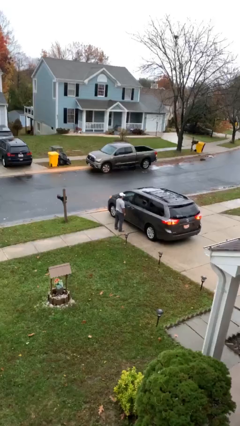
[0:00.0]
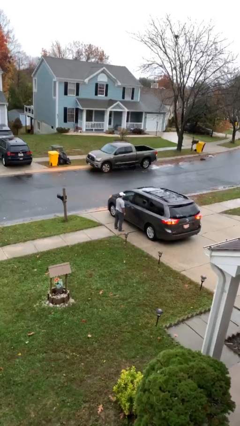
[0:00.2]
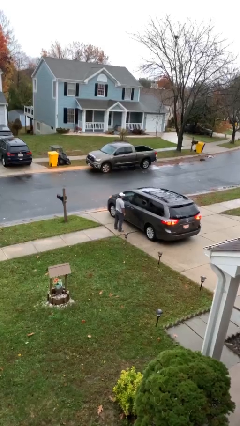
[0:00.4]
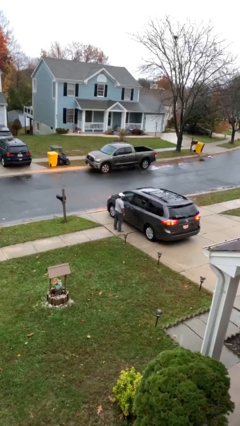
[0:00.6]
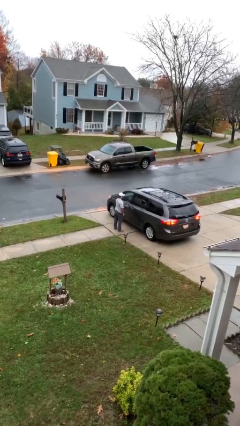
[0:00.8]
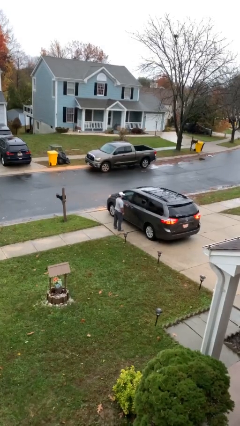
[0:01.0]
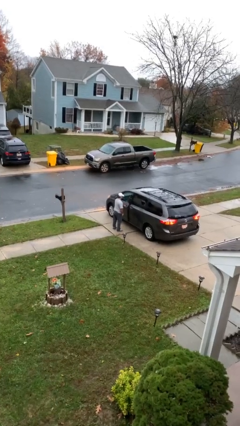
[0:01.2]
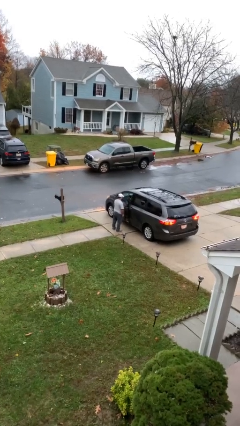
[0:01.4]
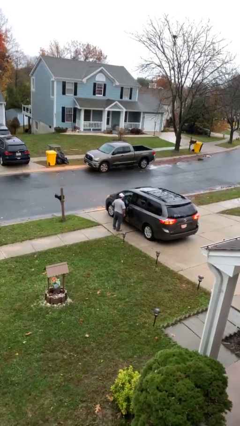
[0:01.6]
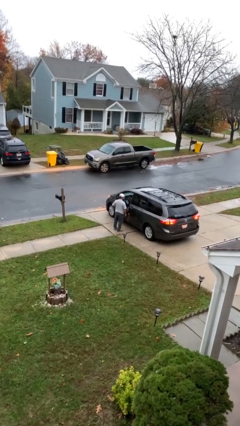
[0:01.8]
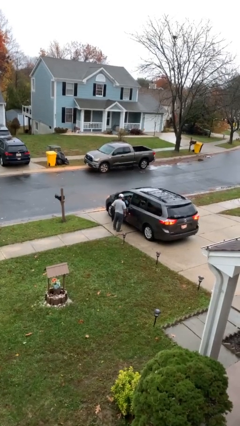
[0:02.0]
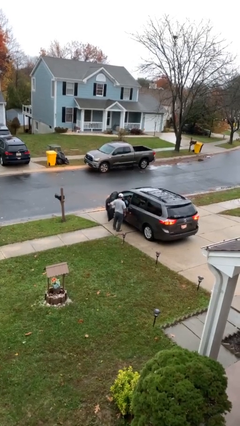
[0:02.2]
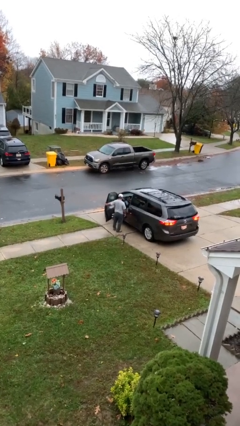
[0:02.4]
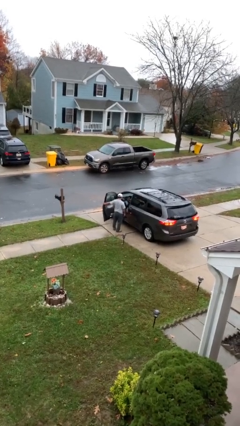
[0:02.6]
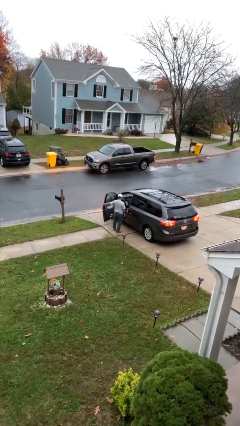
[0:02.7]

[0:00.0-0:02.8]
person opens car door

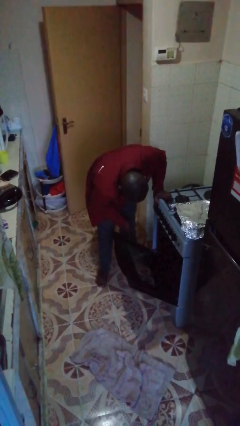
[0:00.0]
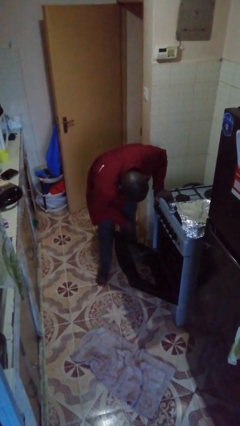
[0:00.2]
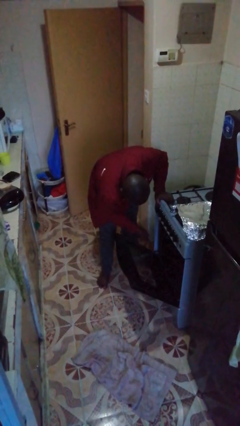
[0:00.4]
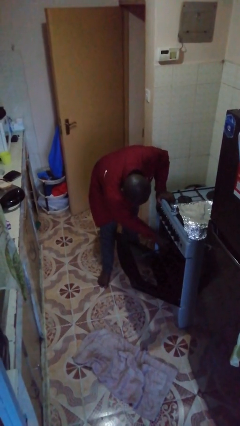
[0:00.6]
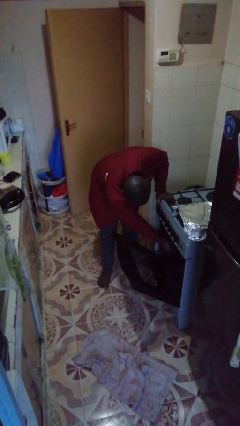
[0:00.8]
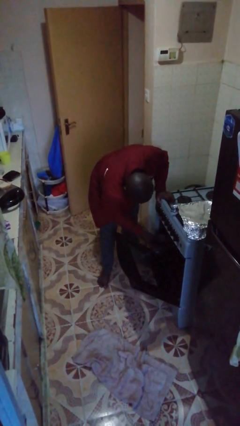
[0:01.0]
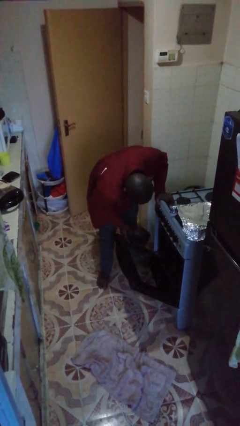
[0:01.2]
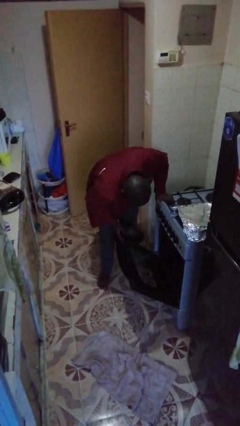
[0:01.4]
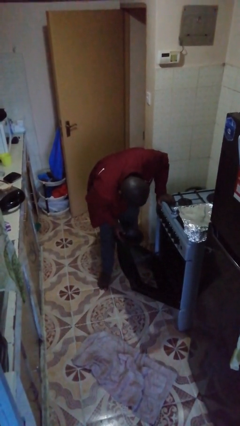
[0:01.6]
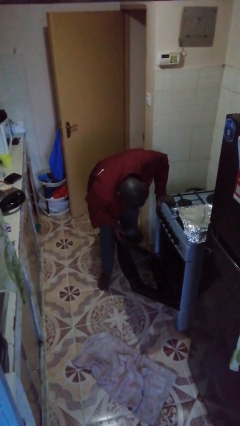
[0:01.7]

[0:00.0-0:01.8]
person takes object from oven

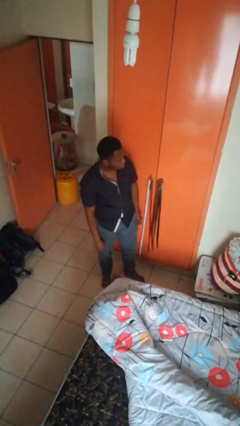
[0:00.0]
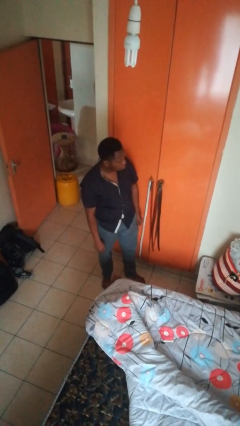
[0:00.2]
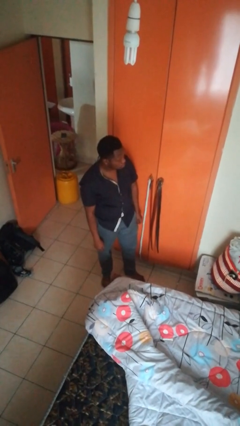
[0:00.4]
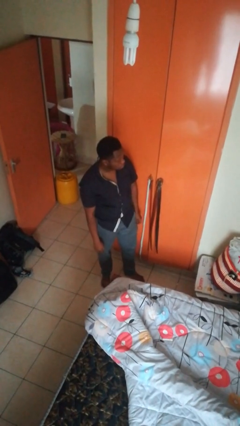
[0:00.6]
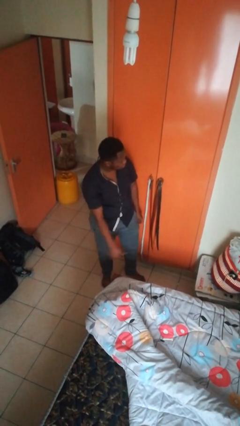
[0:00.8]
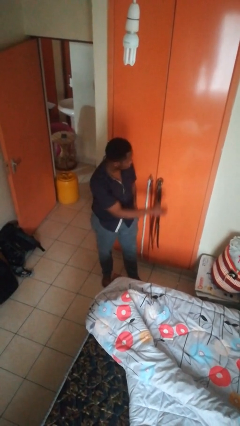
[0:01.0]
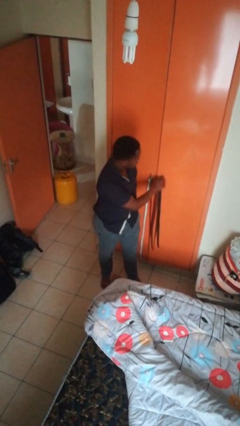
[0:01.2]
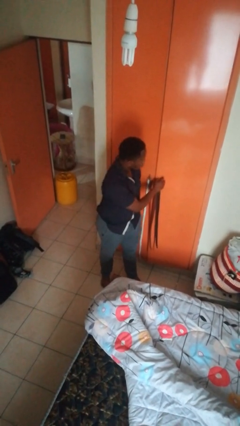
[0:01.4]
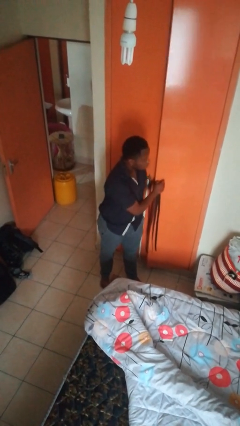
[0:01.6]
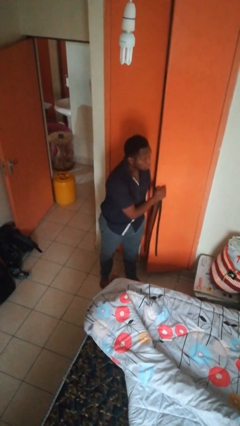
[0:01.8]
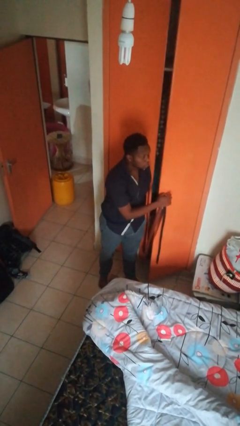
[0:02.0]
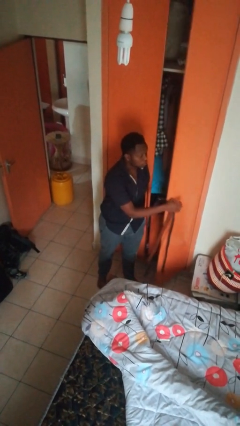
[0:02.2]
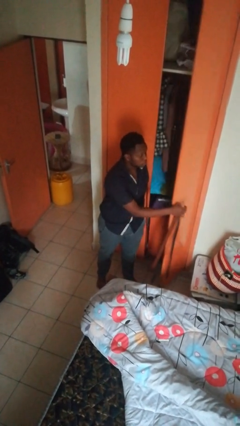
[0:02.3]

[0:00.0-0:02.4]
person opens closet door

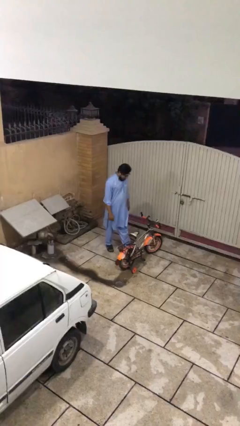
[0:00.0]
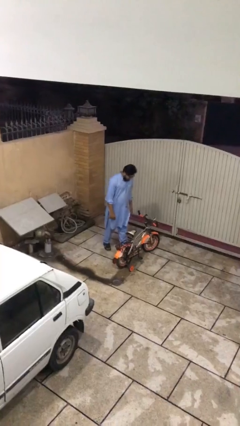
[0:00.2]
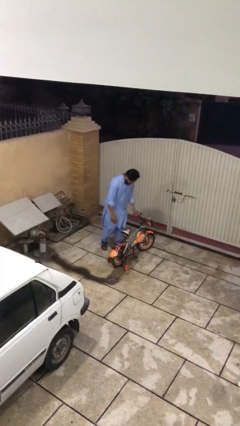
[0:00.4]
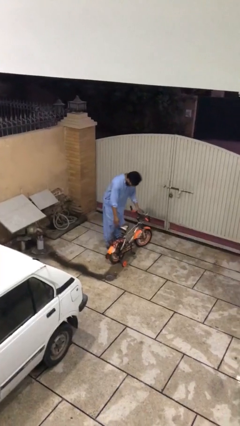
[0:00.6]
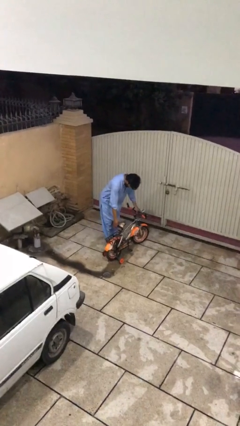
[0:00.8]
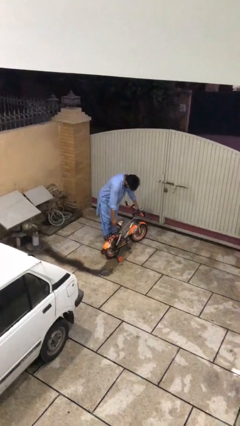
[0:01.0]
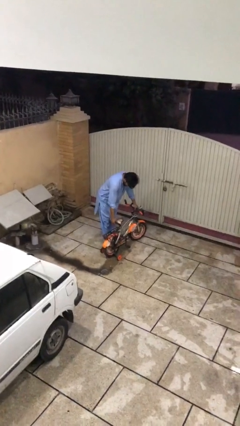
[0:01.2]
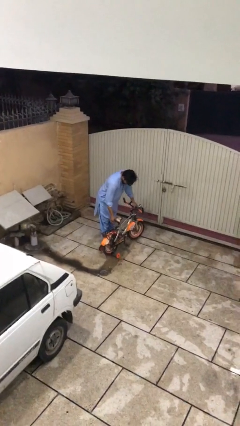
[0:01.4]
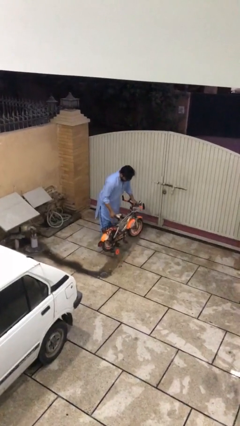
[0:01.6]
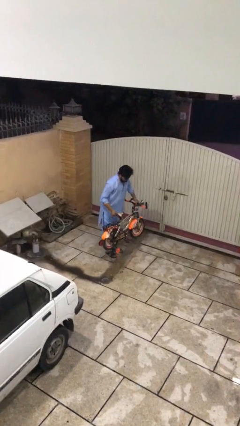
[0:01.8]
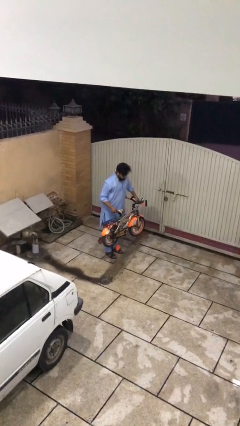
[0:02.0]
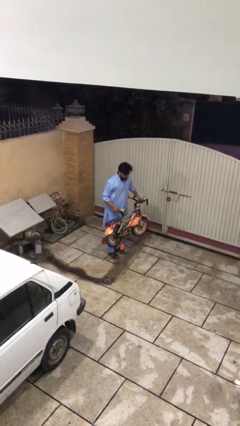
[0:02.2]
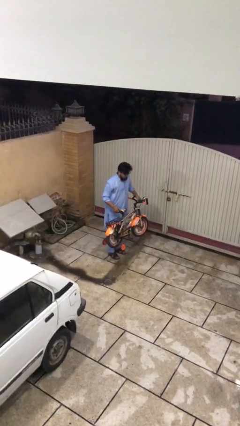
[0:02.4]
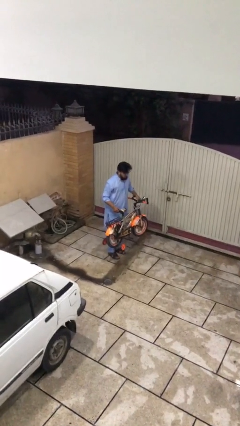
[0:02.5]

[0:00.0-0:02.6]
person picks up object from floor

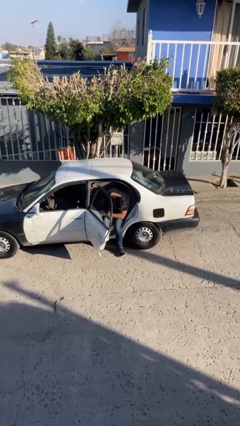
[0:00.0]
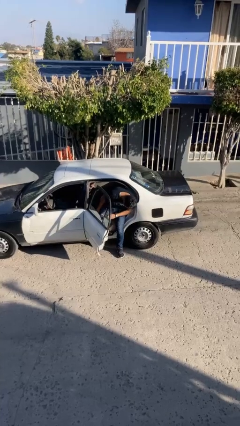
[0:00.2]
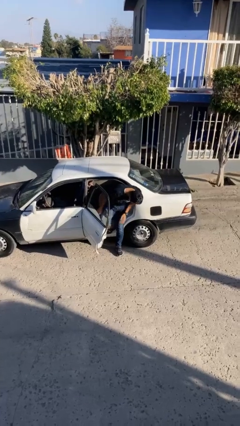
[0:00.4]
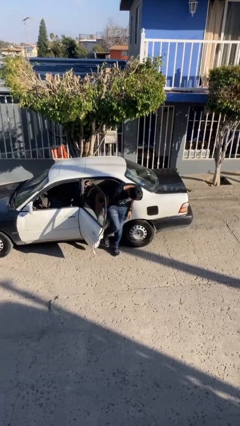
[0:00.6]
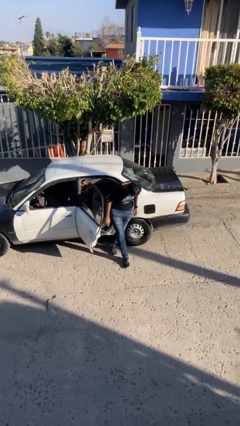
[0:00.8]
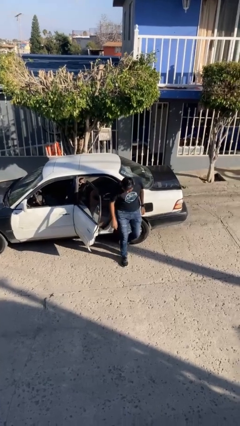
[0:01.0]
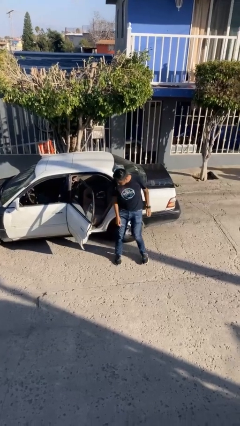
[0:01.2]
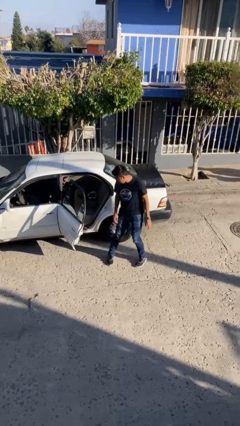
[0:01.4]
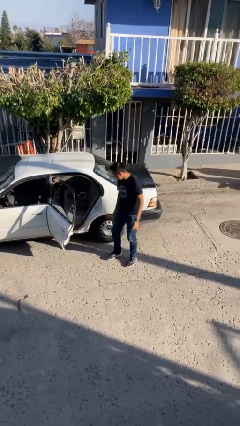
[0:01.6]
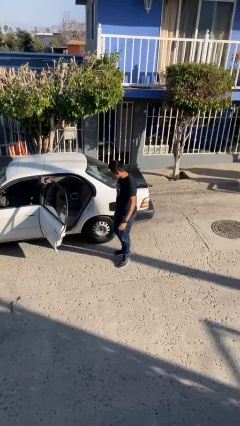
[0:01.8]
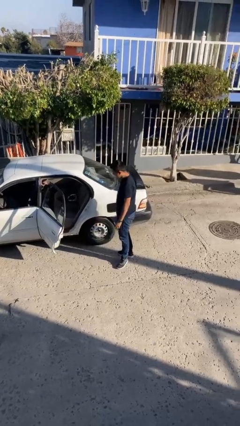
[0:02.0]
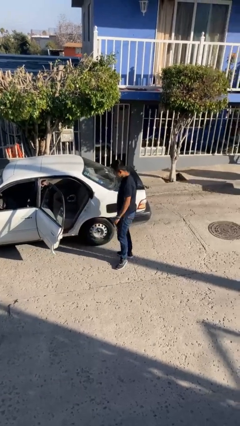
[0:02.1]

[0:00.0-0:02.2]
person exits car

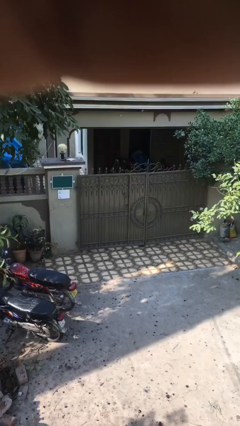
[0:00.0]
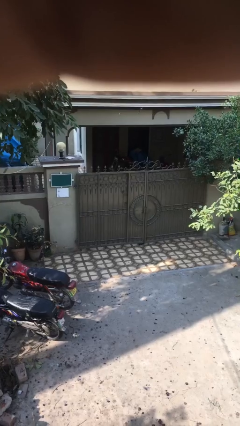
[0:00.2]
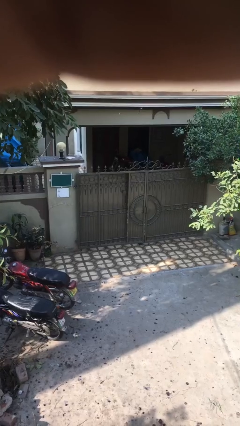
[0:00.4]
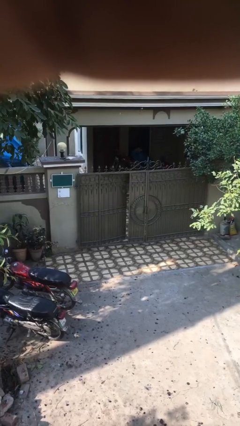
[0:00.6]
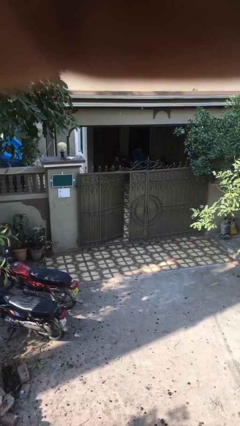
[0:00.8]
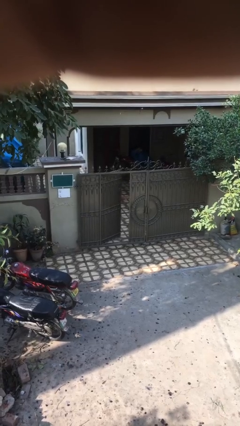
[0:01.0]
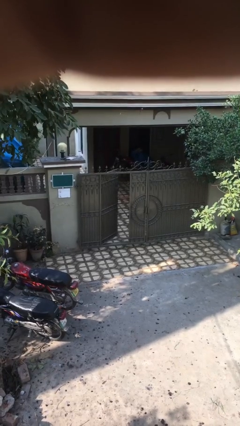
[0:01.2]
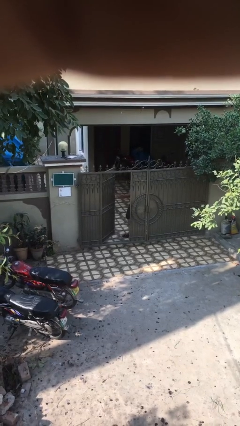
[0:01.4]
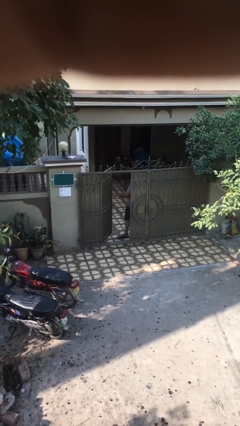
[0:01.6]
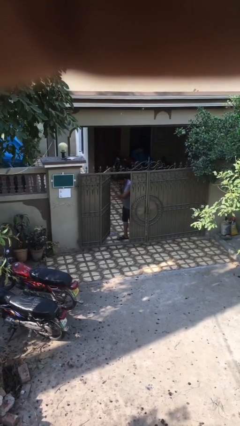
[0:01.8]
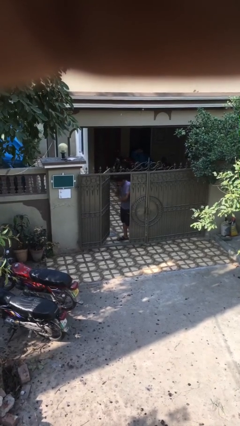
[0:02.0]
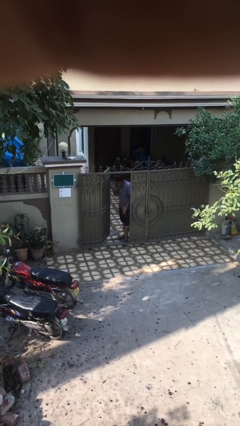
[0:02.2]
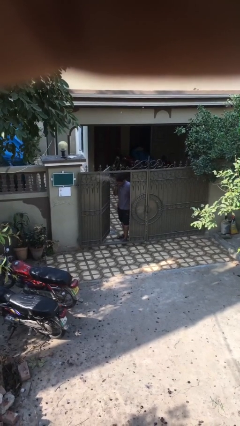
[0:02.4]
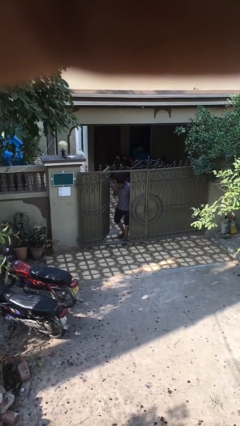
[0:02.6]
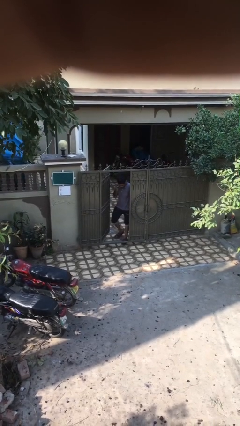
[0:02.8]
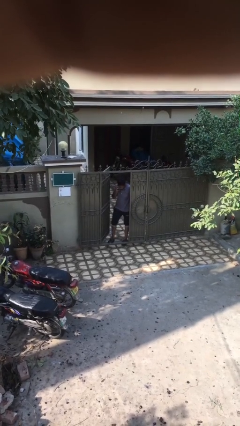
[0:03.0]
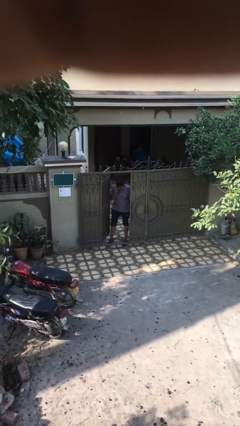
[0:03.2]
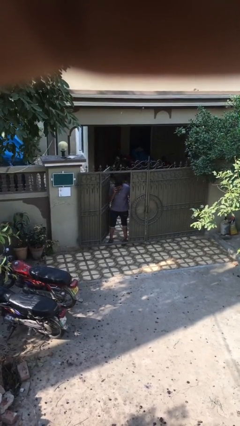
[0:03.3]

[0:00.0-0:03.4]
person opens facility door

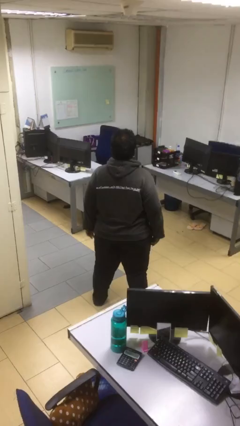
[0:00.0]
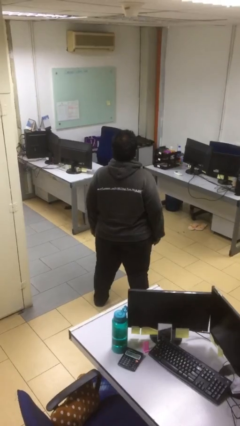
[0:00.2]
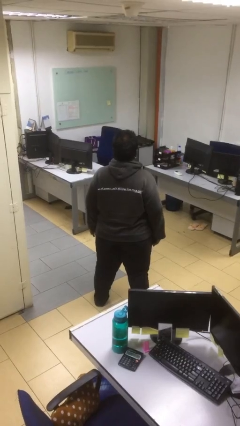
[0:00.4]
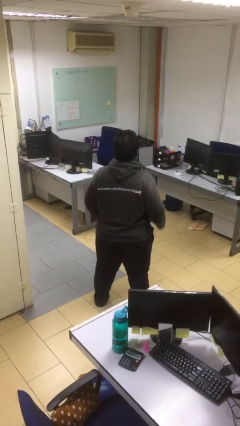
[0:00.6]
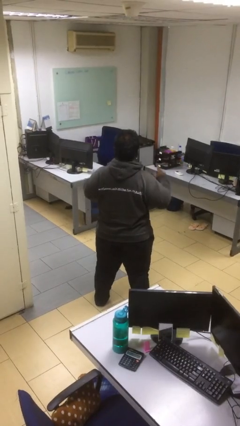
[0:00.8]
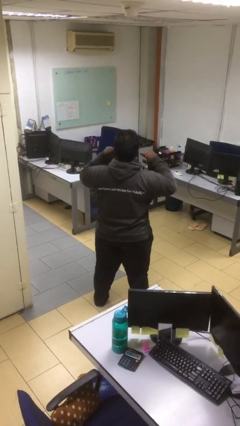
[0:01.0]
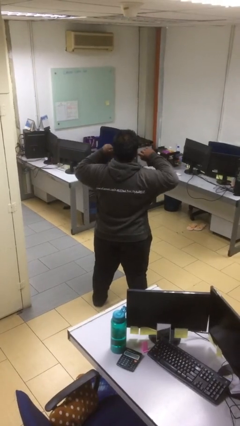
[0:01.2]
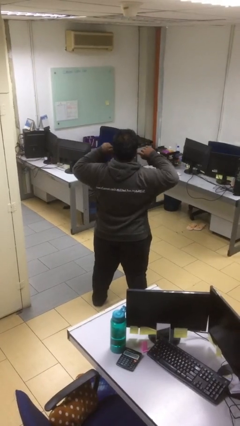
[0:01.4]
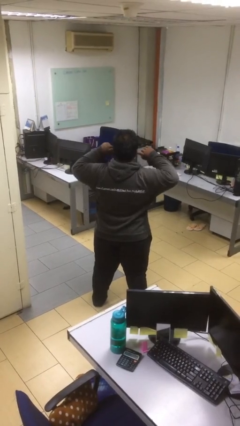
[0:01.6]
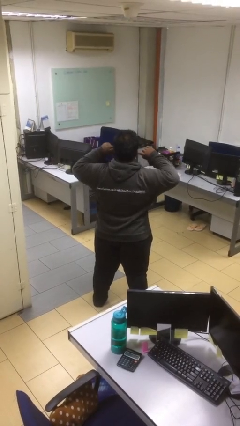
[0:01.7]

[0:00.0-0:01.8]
person puts fingers in ear

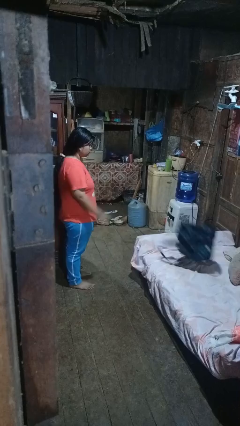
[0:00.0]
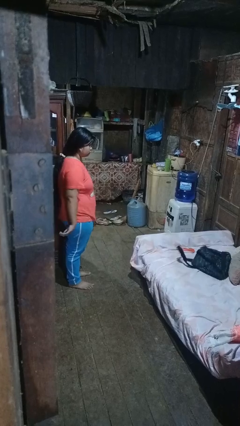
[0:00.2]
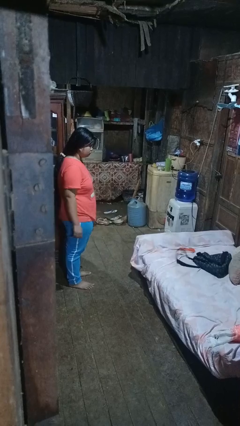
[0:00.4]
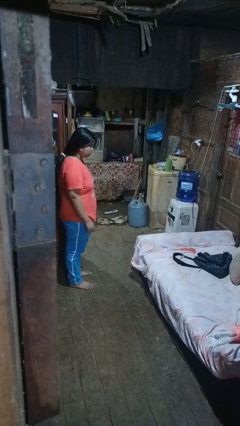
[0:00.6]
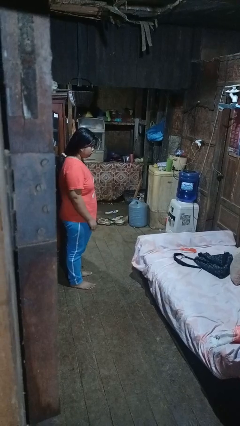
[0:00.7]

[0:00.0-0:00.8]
person throws object on bed
